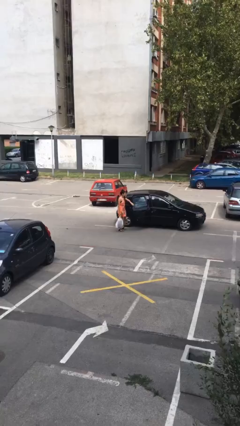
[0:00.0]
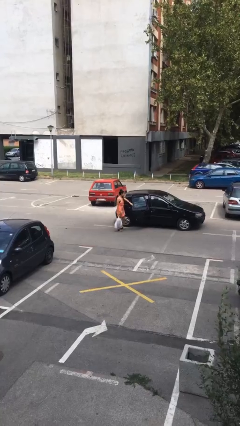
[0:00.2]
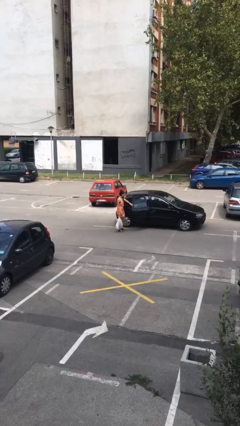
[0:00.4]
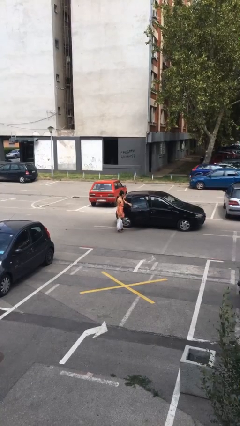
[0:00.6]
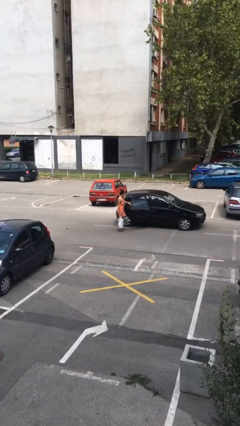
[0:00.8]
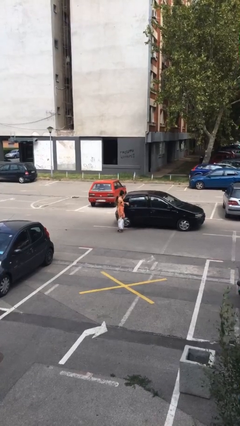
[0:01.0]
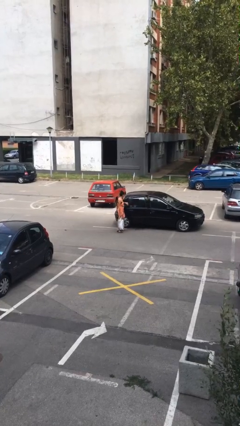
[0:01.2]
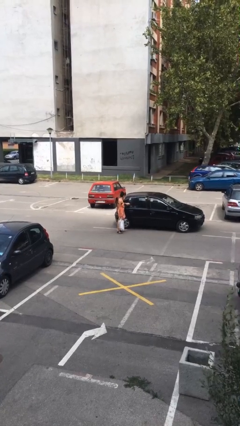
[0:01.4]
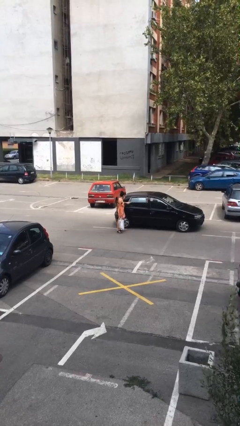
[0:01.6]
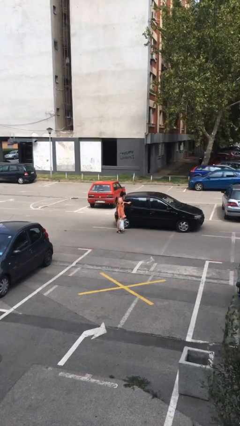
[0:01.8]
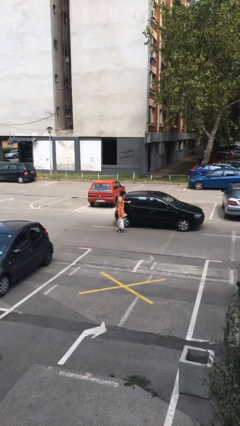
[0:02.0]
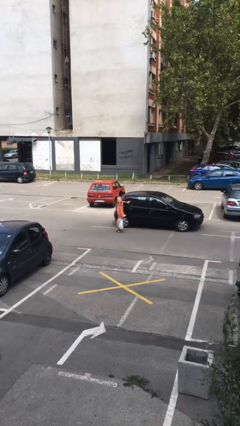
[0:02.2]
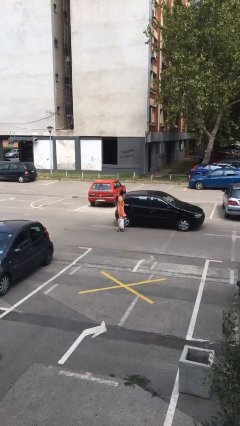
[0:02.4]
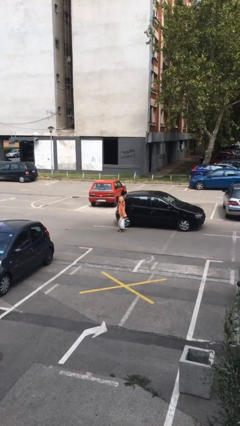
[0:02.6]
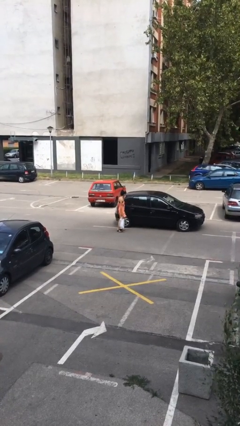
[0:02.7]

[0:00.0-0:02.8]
person closes car door

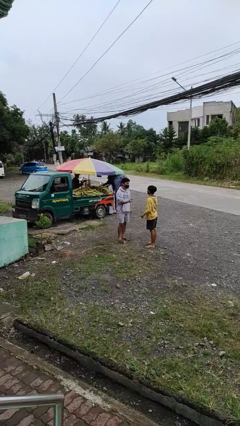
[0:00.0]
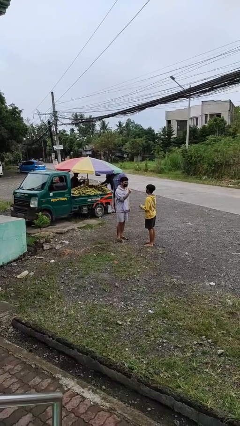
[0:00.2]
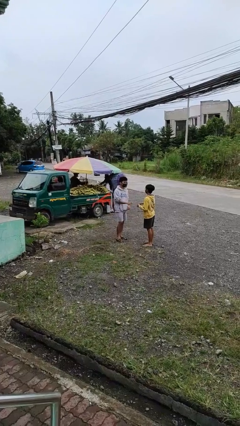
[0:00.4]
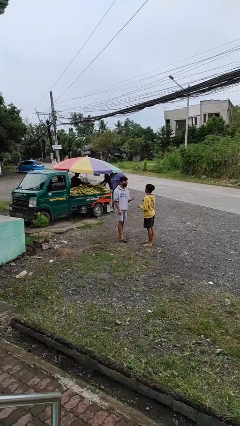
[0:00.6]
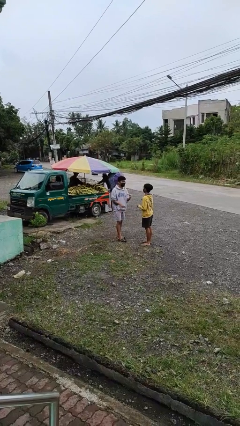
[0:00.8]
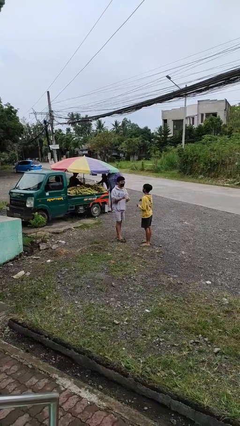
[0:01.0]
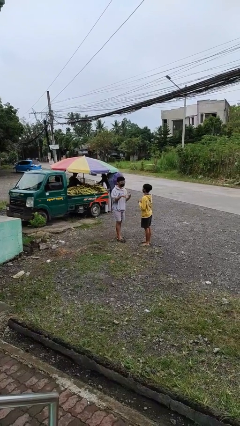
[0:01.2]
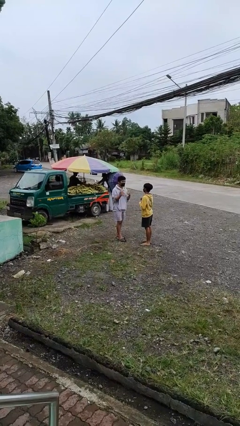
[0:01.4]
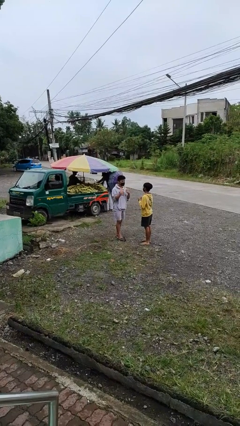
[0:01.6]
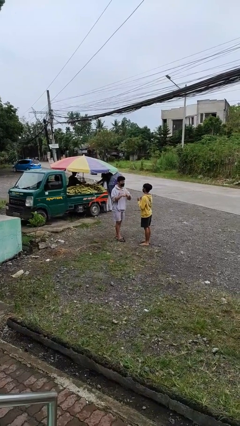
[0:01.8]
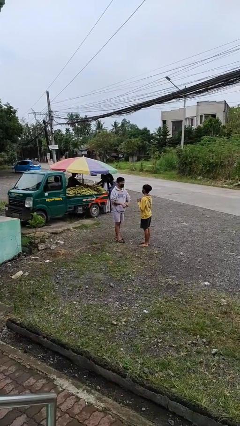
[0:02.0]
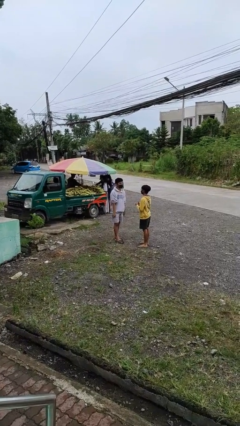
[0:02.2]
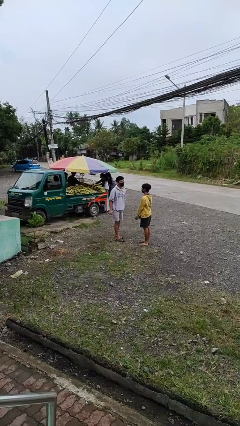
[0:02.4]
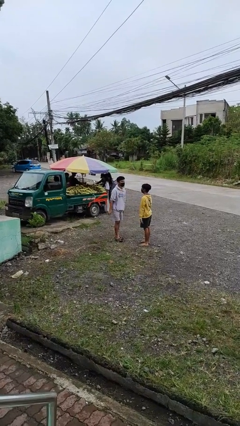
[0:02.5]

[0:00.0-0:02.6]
person talks to person

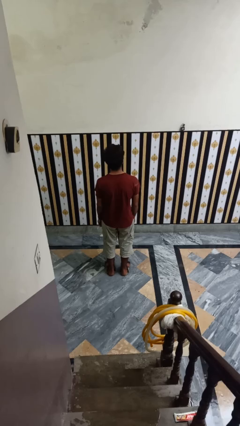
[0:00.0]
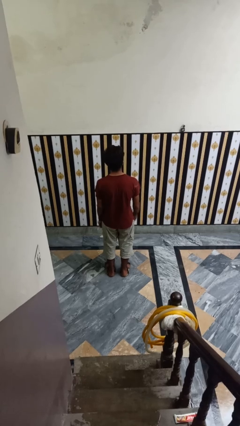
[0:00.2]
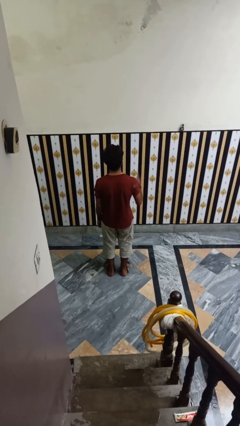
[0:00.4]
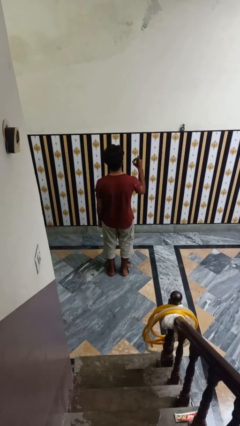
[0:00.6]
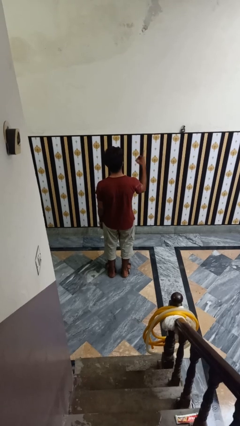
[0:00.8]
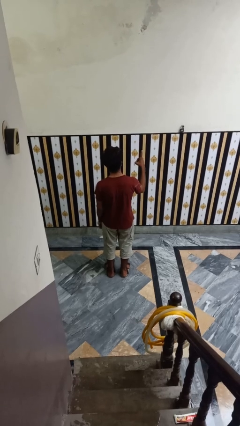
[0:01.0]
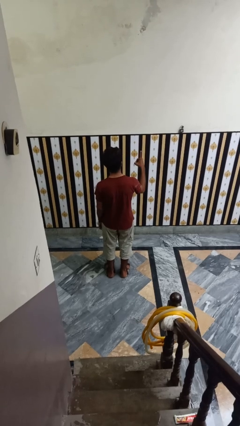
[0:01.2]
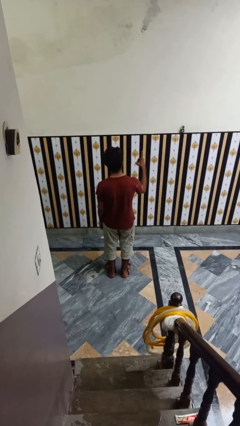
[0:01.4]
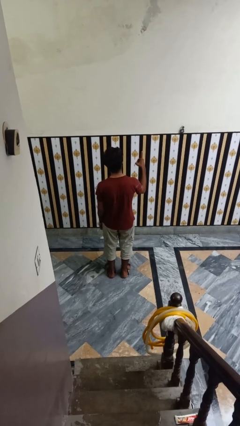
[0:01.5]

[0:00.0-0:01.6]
person gestures number one

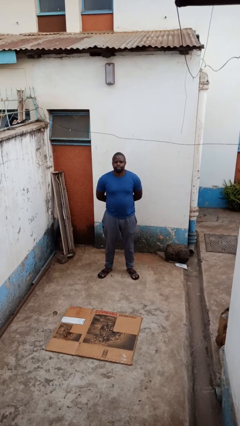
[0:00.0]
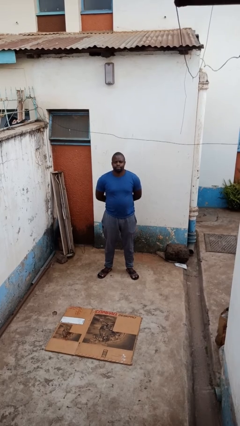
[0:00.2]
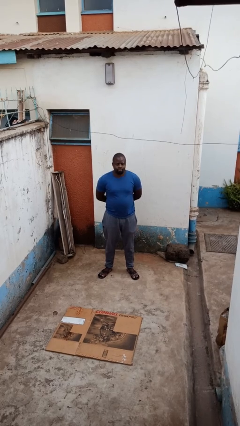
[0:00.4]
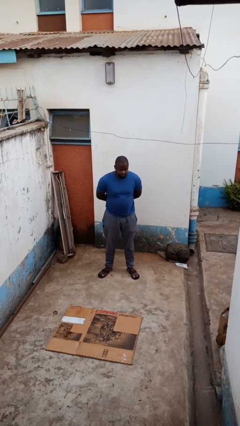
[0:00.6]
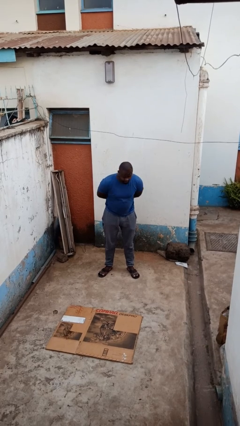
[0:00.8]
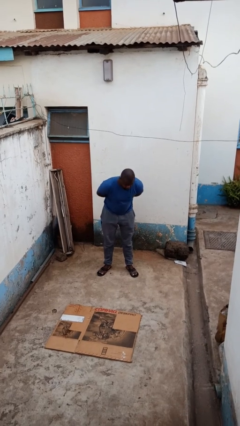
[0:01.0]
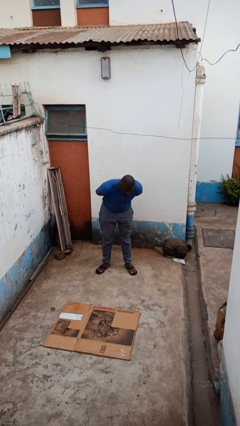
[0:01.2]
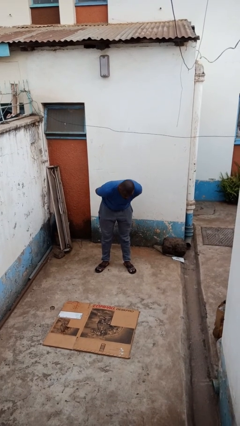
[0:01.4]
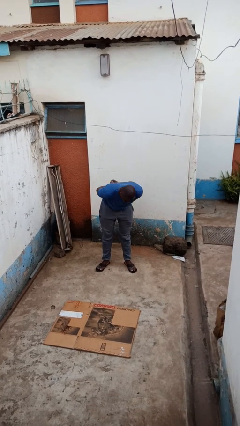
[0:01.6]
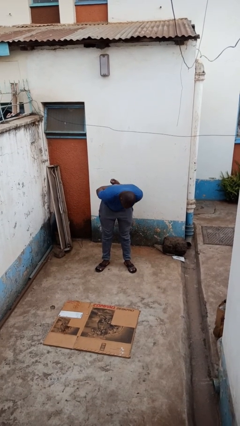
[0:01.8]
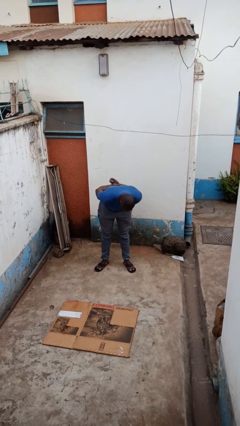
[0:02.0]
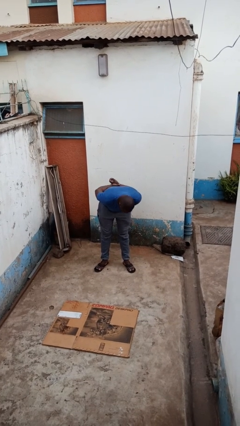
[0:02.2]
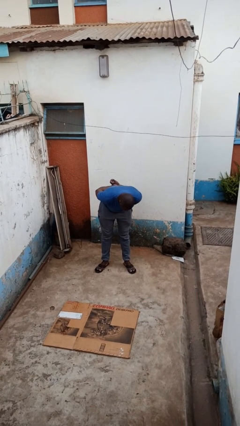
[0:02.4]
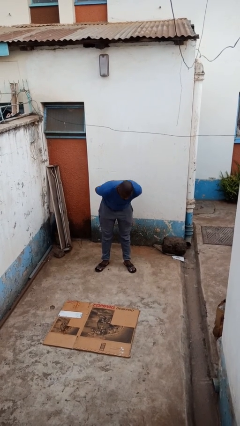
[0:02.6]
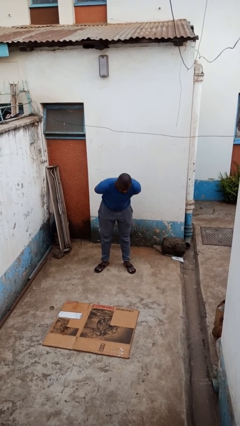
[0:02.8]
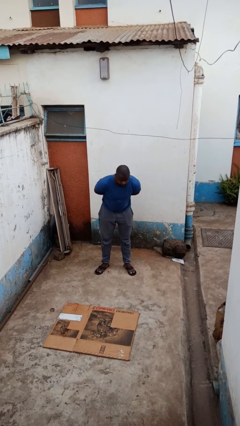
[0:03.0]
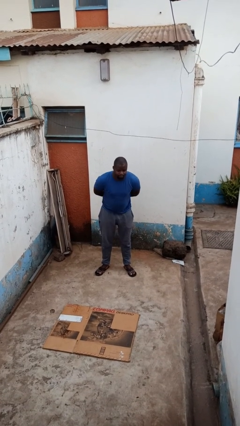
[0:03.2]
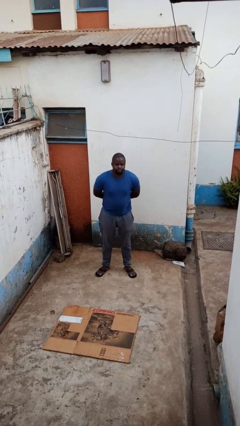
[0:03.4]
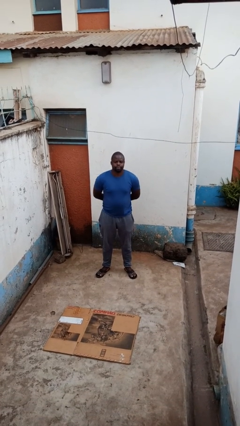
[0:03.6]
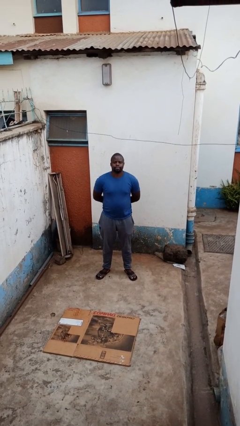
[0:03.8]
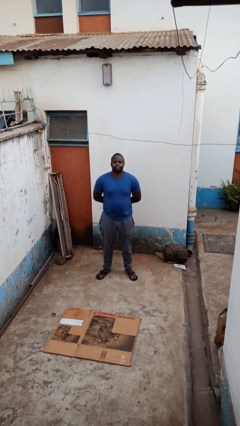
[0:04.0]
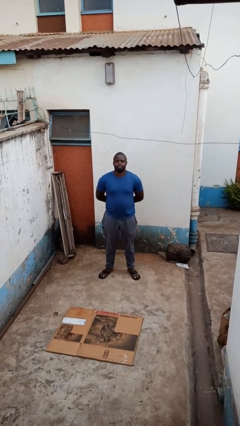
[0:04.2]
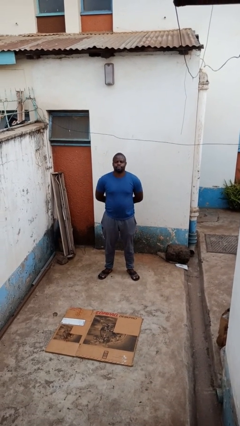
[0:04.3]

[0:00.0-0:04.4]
person bows

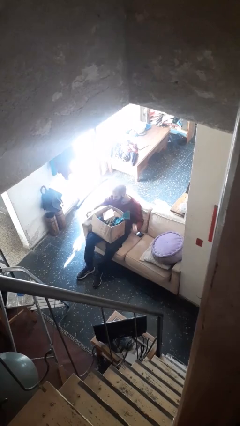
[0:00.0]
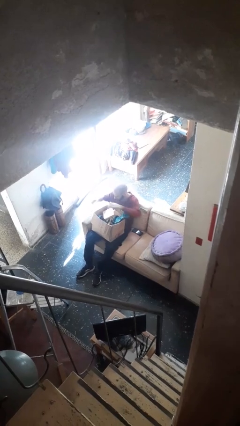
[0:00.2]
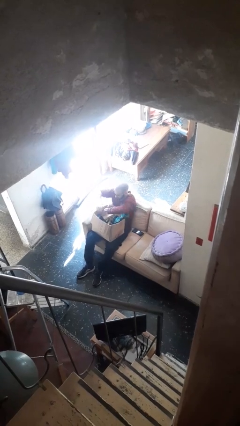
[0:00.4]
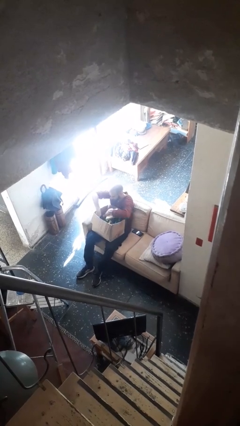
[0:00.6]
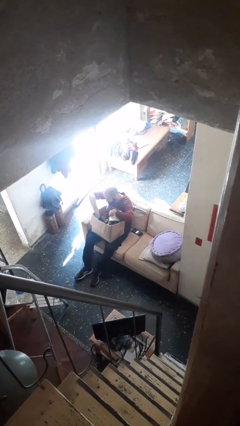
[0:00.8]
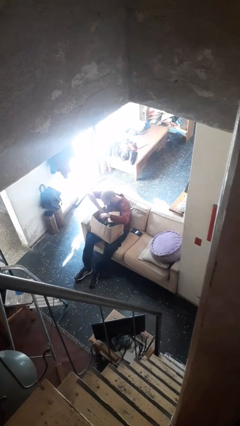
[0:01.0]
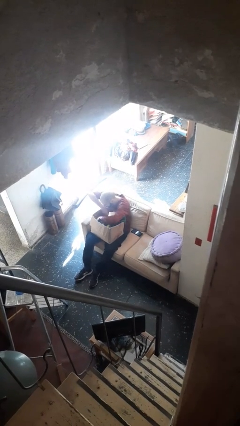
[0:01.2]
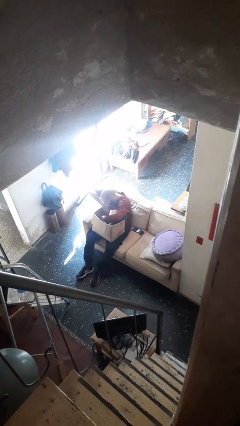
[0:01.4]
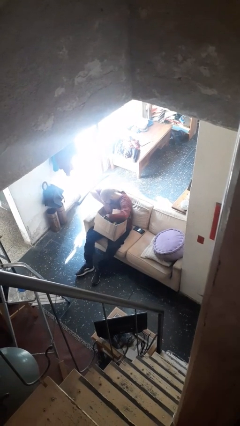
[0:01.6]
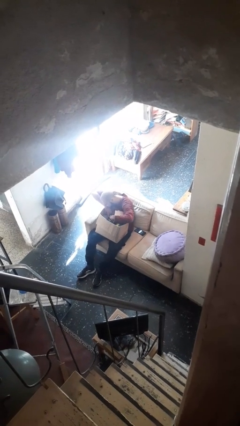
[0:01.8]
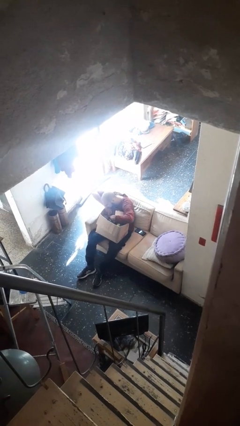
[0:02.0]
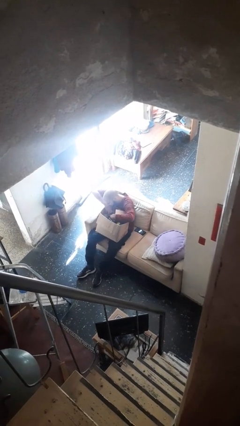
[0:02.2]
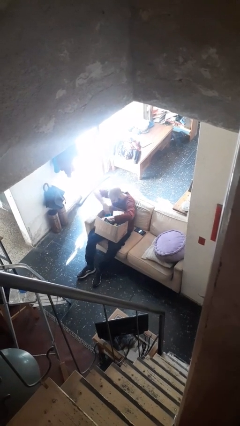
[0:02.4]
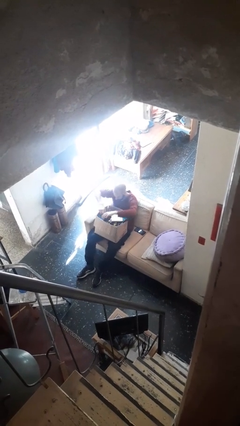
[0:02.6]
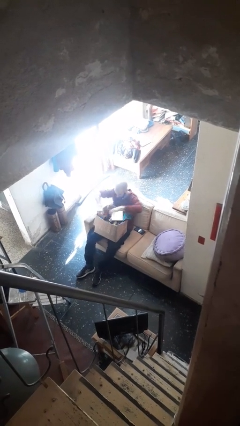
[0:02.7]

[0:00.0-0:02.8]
person searches in box

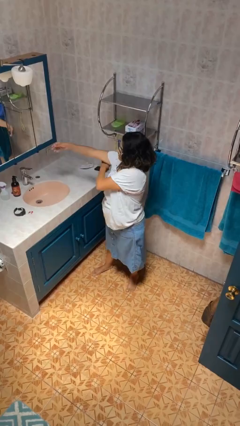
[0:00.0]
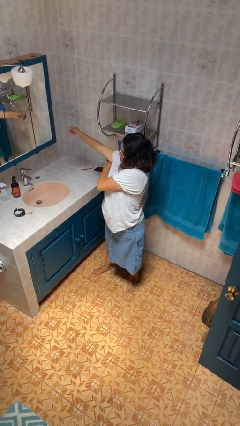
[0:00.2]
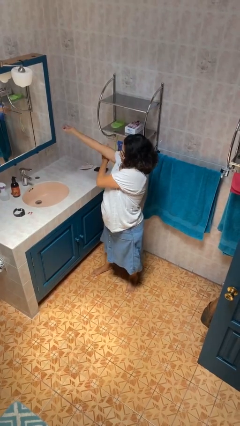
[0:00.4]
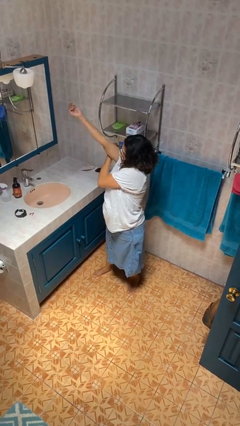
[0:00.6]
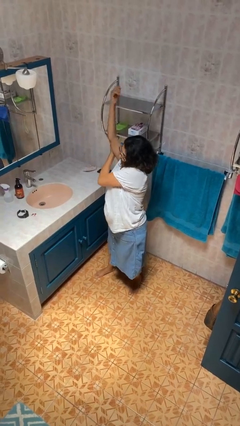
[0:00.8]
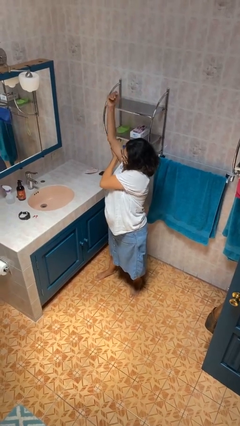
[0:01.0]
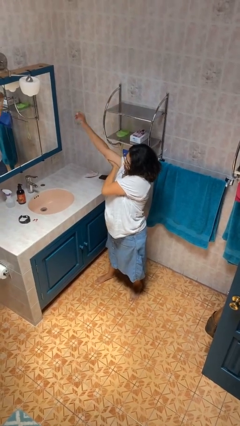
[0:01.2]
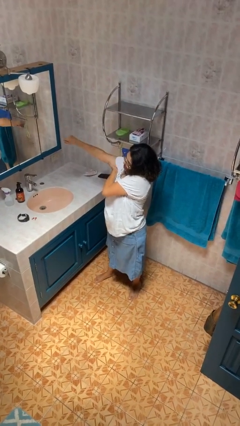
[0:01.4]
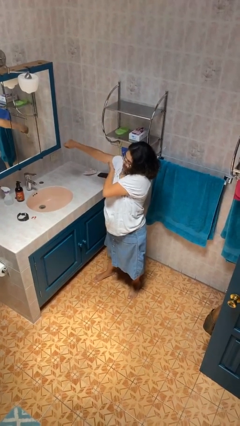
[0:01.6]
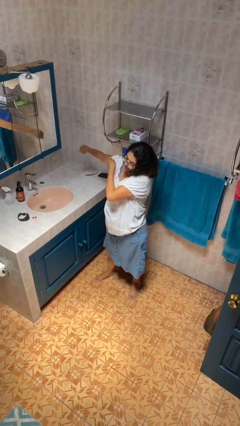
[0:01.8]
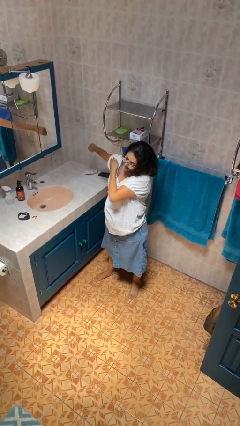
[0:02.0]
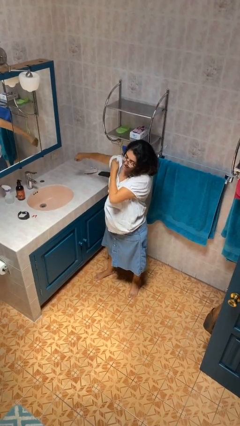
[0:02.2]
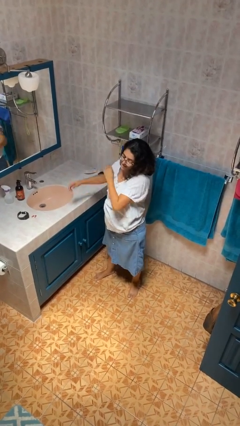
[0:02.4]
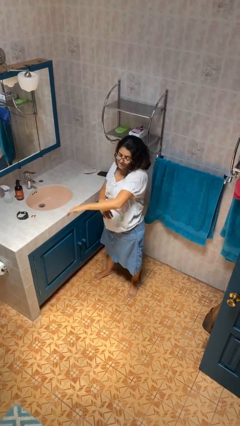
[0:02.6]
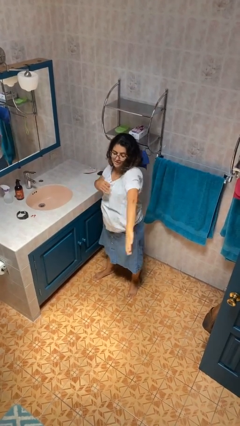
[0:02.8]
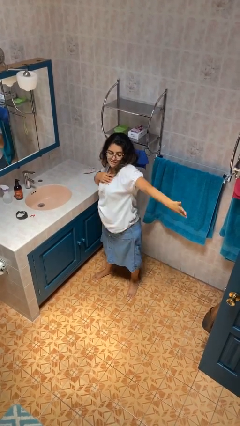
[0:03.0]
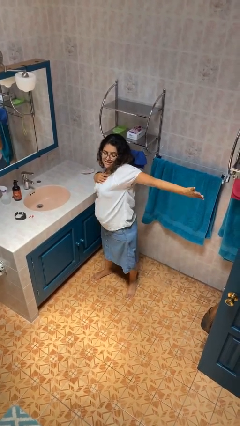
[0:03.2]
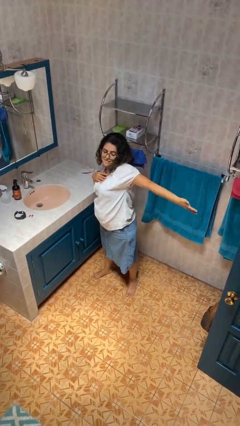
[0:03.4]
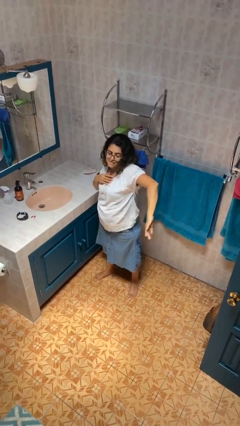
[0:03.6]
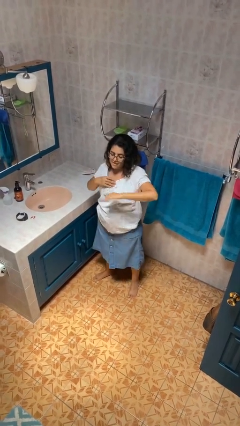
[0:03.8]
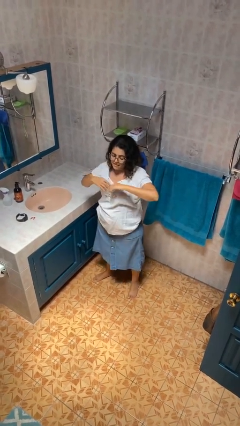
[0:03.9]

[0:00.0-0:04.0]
person stretches arms to side
